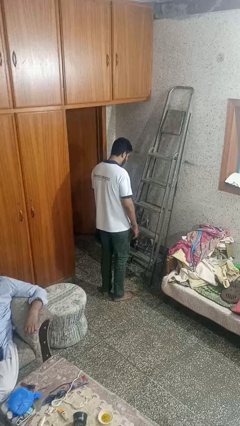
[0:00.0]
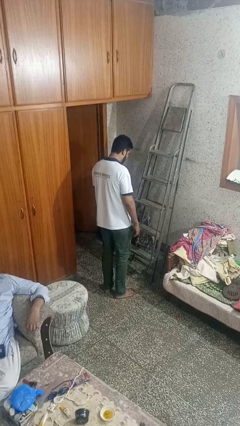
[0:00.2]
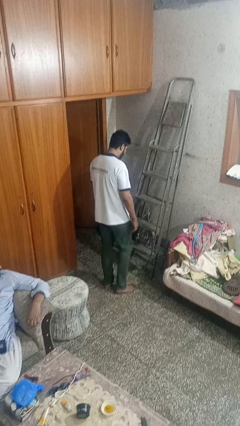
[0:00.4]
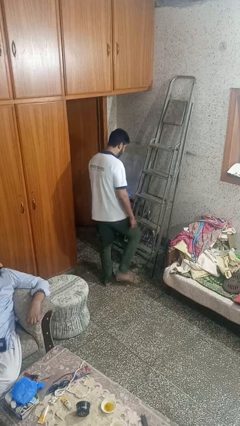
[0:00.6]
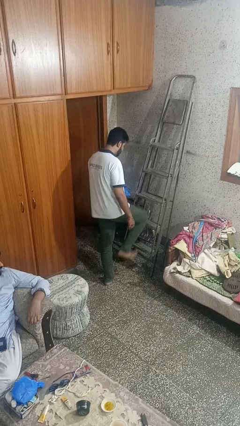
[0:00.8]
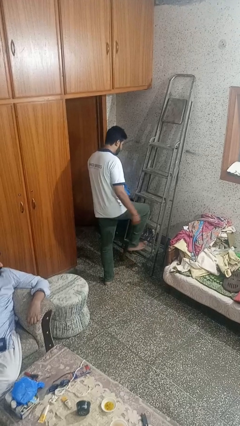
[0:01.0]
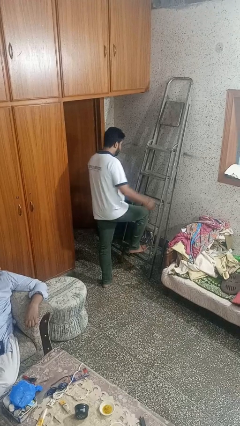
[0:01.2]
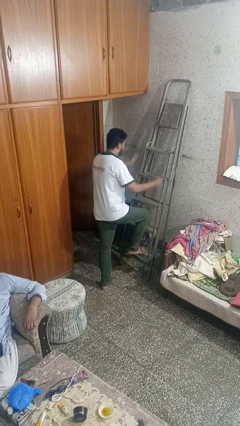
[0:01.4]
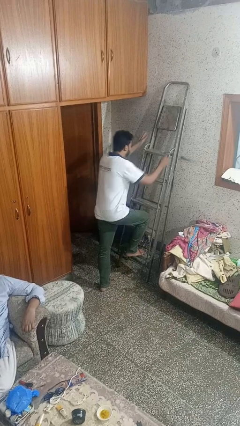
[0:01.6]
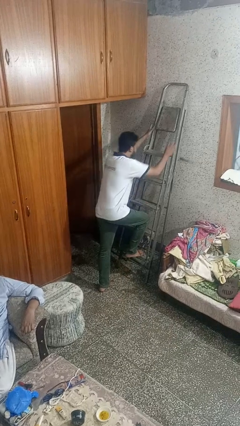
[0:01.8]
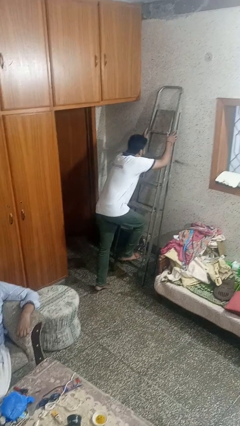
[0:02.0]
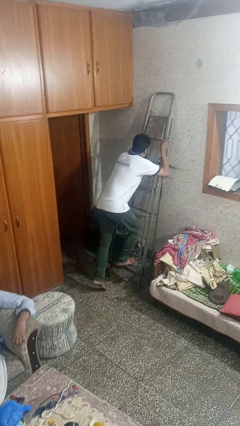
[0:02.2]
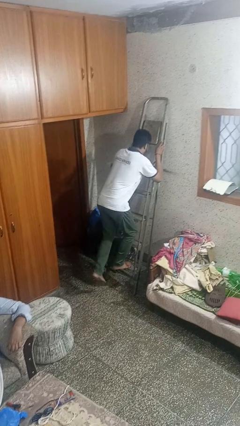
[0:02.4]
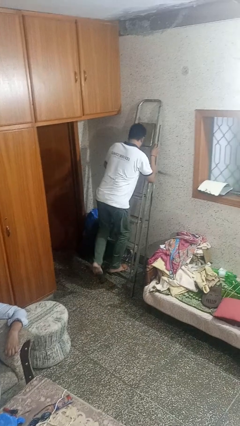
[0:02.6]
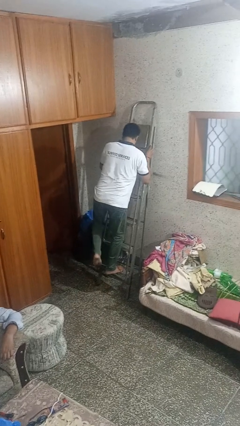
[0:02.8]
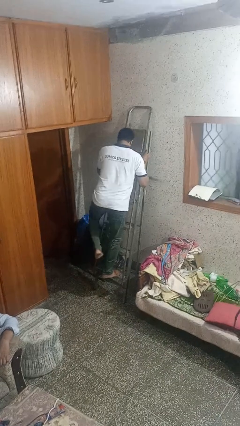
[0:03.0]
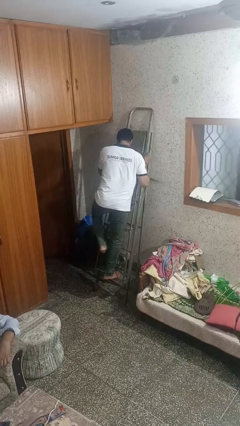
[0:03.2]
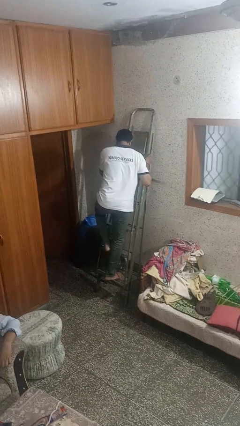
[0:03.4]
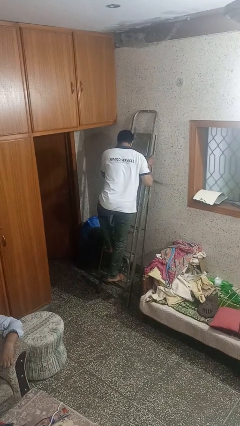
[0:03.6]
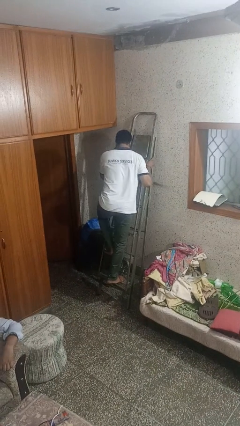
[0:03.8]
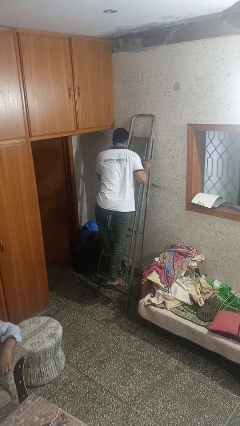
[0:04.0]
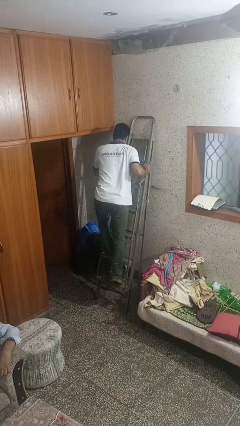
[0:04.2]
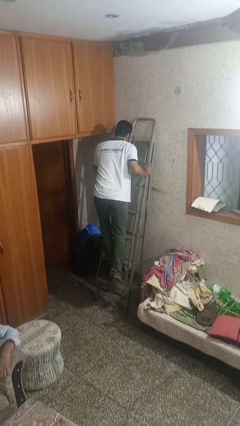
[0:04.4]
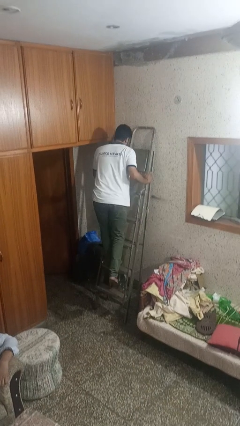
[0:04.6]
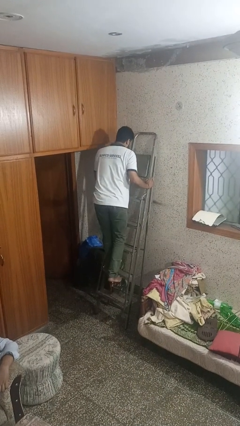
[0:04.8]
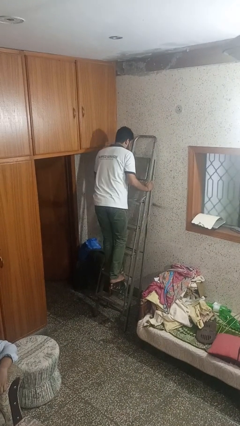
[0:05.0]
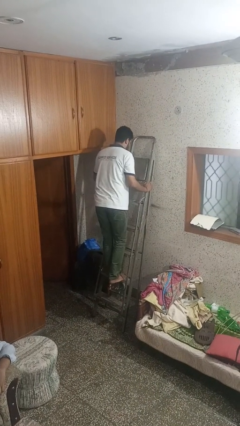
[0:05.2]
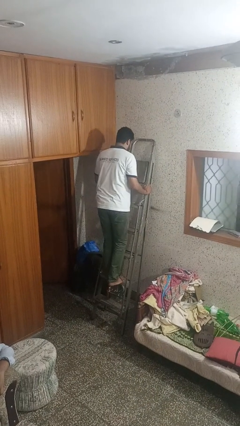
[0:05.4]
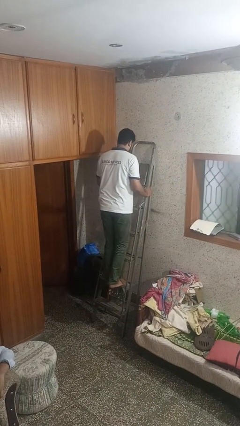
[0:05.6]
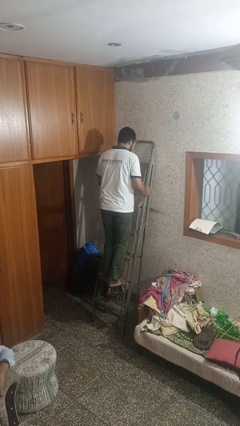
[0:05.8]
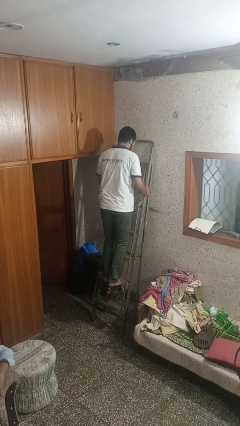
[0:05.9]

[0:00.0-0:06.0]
person climbs up ladder

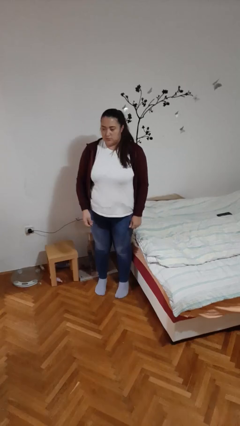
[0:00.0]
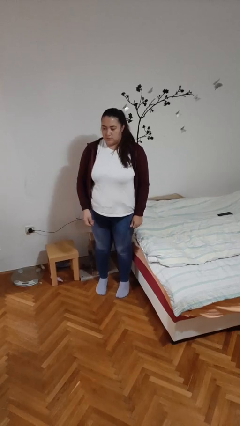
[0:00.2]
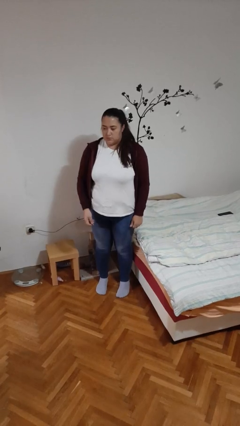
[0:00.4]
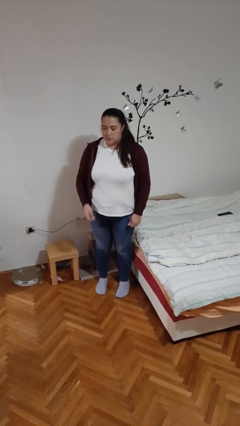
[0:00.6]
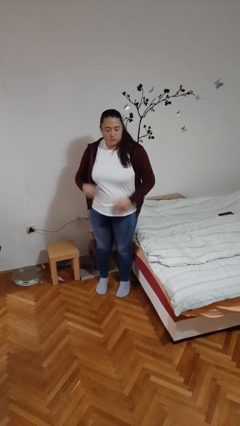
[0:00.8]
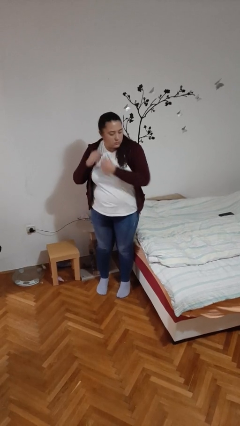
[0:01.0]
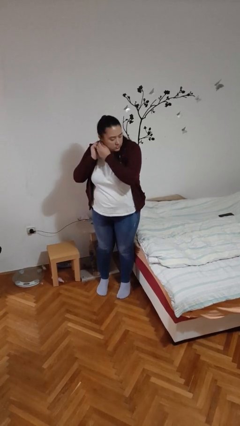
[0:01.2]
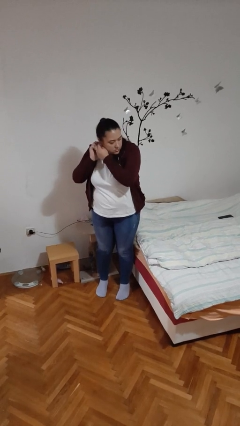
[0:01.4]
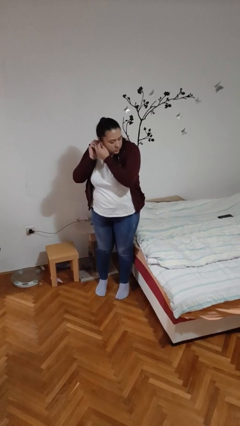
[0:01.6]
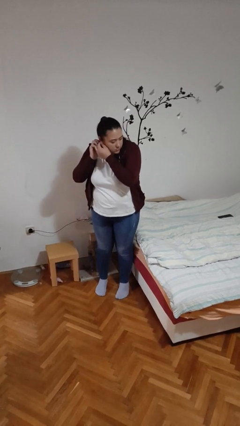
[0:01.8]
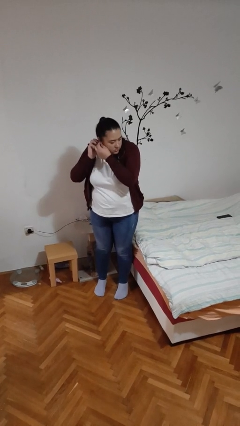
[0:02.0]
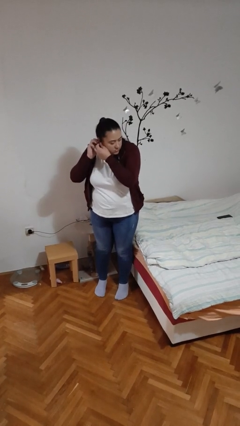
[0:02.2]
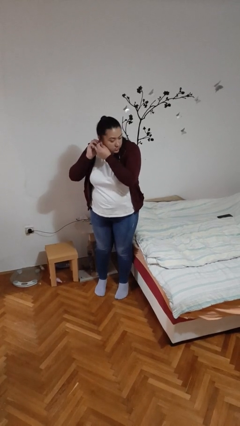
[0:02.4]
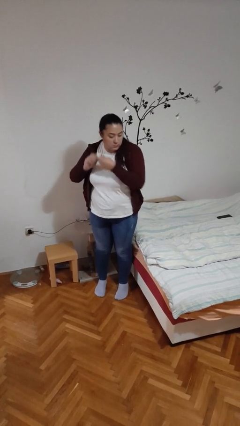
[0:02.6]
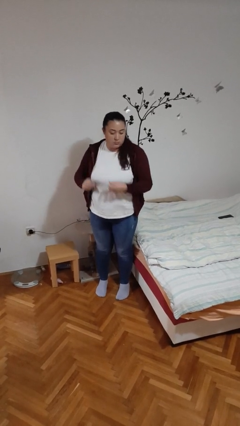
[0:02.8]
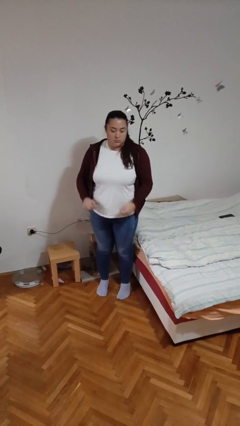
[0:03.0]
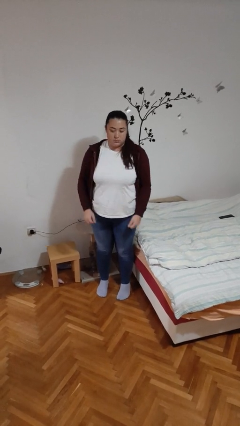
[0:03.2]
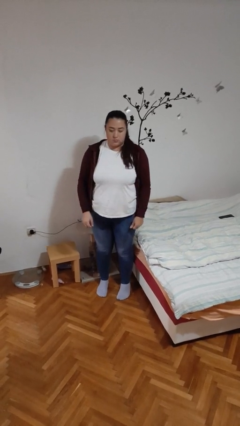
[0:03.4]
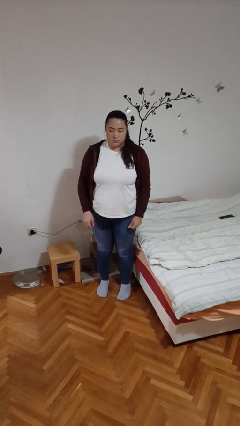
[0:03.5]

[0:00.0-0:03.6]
person puts on earrings

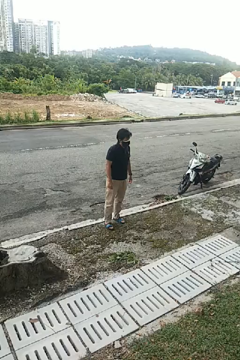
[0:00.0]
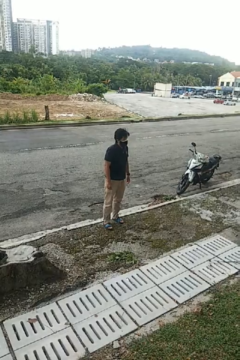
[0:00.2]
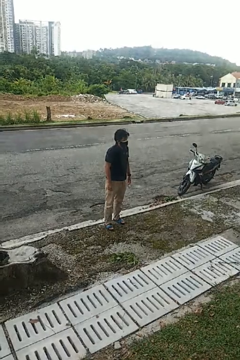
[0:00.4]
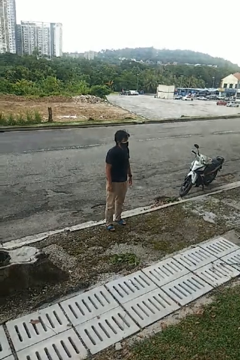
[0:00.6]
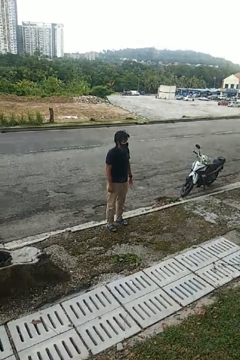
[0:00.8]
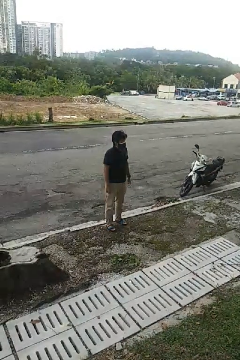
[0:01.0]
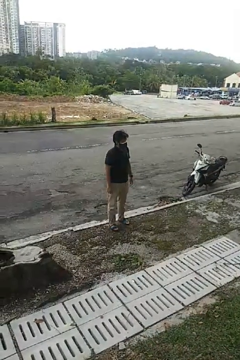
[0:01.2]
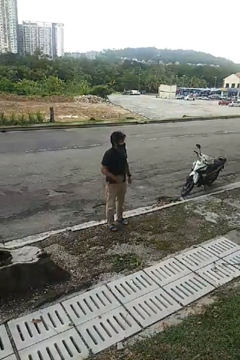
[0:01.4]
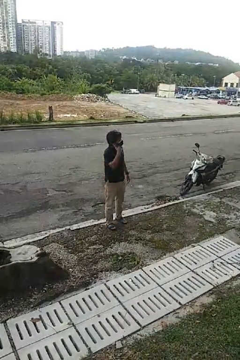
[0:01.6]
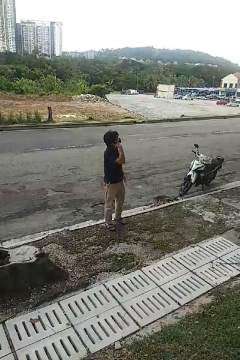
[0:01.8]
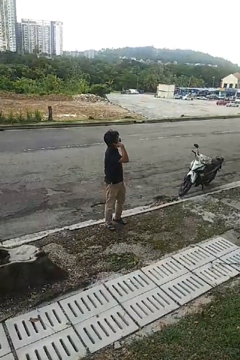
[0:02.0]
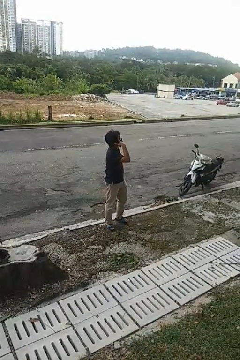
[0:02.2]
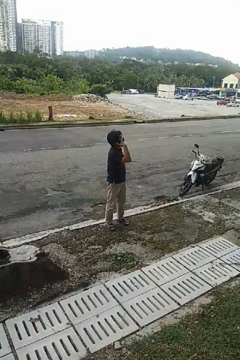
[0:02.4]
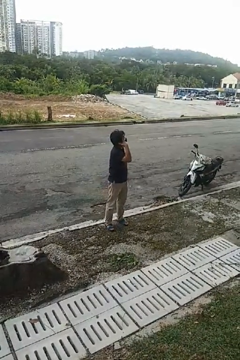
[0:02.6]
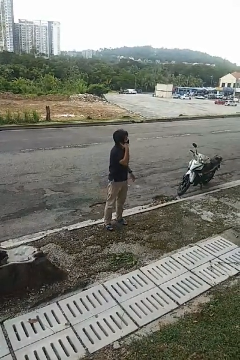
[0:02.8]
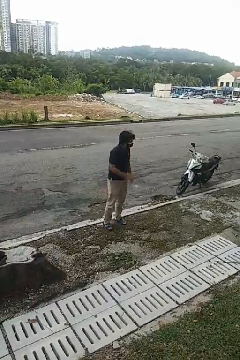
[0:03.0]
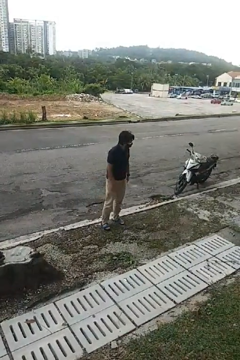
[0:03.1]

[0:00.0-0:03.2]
person gestures call me

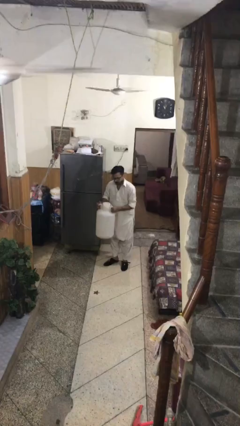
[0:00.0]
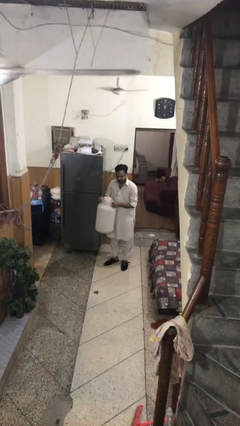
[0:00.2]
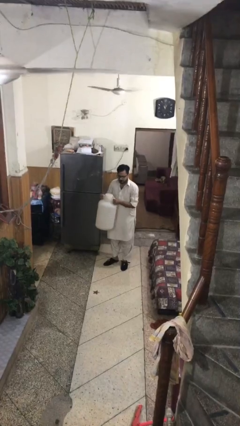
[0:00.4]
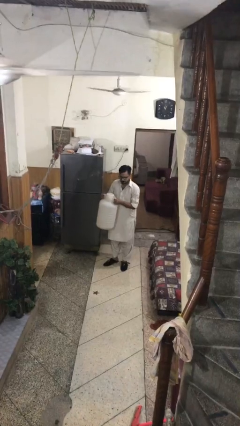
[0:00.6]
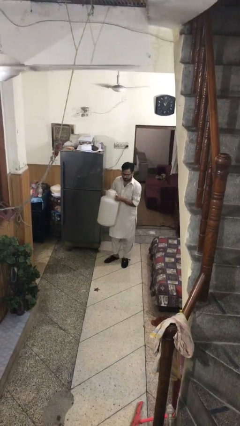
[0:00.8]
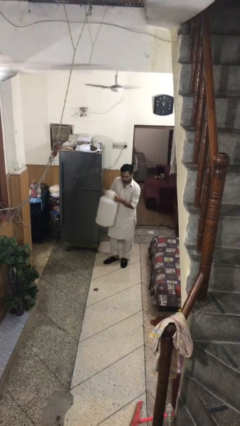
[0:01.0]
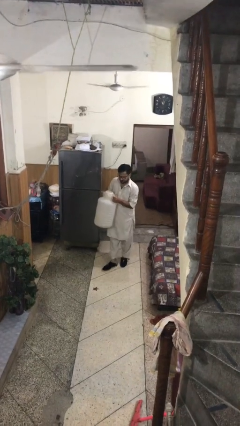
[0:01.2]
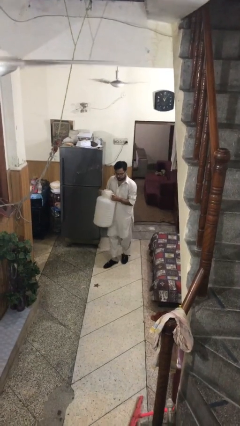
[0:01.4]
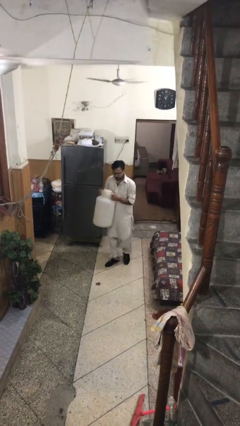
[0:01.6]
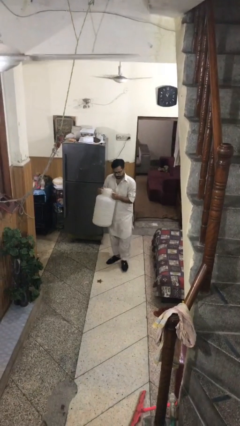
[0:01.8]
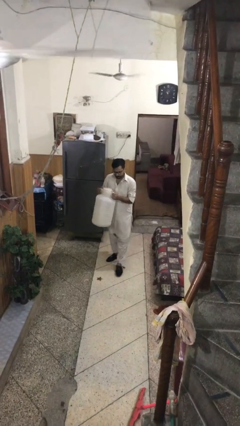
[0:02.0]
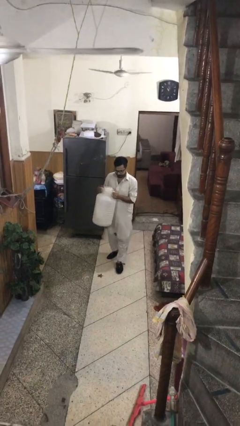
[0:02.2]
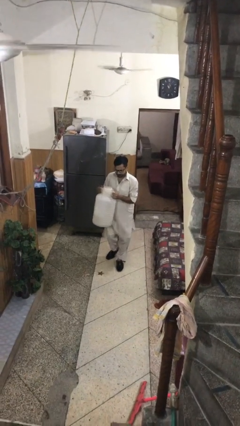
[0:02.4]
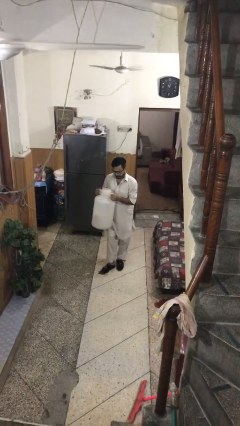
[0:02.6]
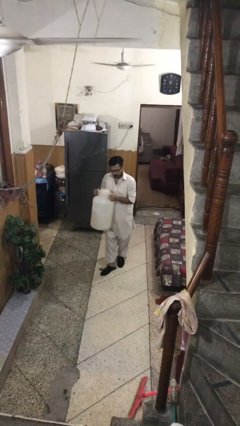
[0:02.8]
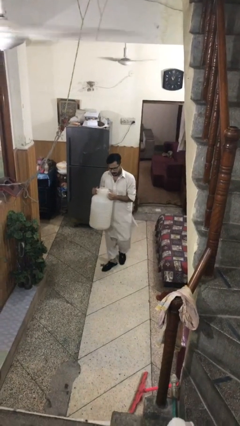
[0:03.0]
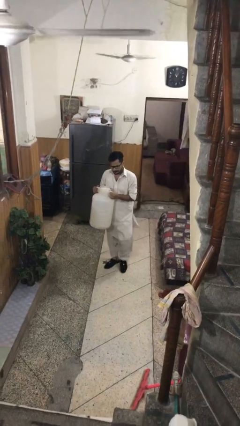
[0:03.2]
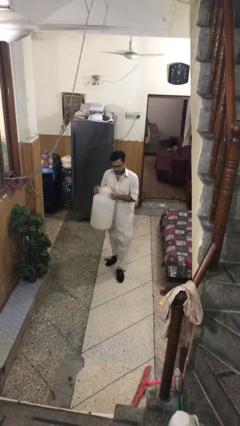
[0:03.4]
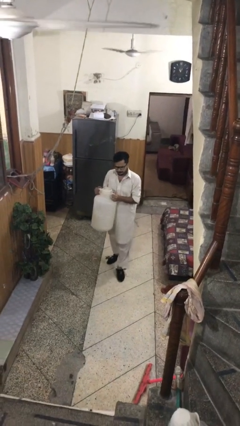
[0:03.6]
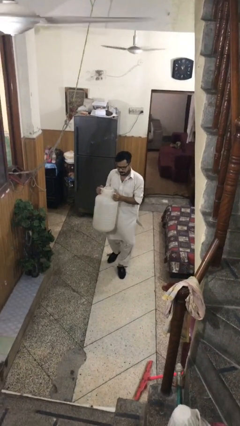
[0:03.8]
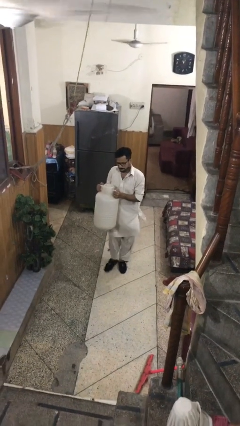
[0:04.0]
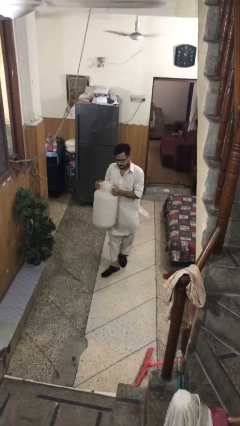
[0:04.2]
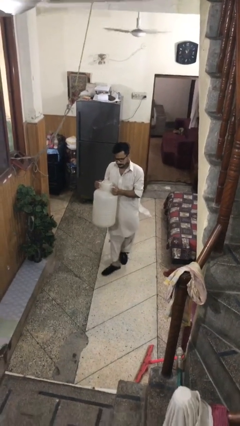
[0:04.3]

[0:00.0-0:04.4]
person carries heavy object

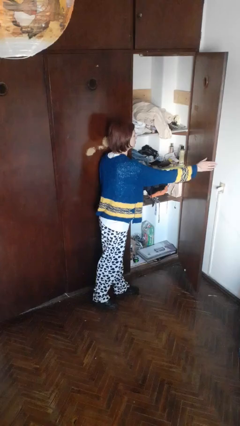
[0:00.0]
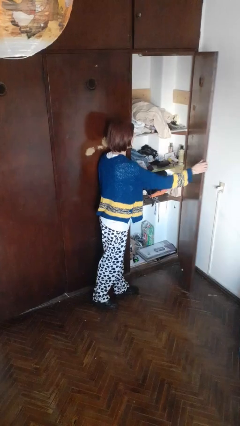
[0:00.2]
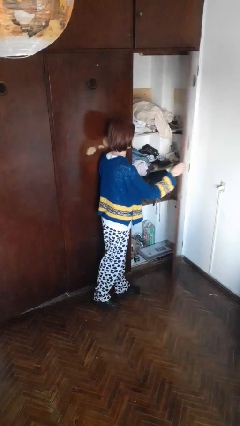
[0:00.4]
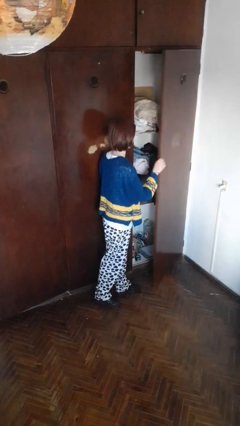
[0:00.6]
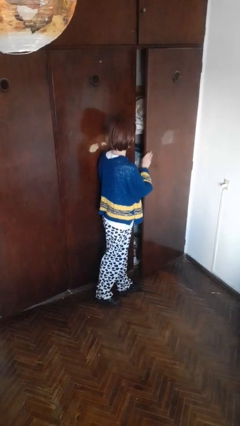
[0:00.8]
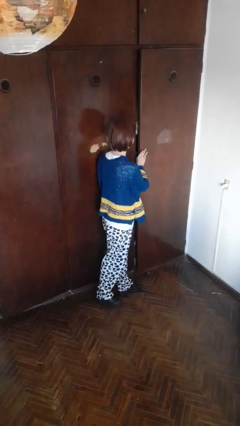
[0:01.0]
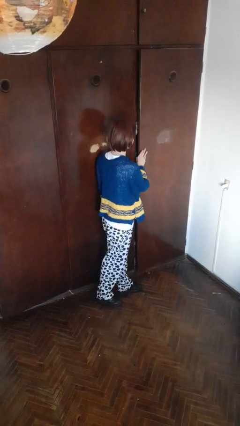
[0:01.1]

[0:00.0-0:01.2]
person closes closet door
